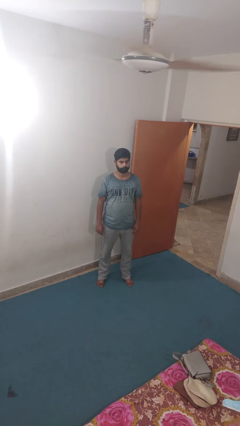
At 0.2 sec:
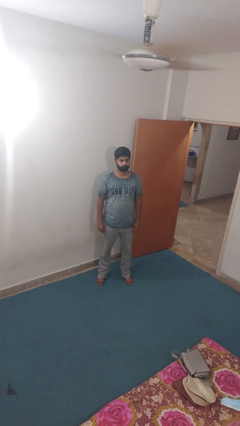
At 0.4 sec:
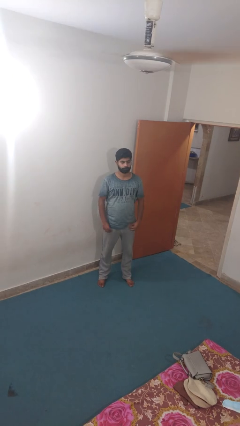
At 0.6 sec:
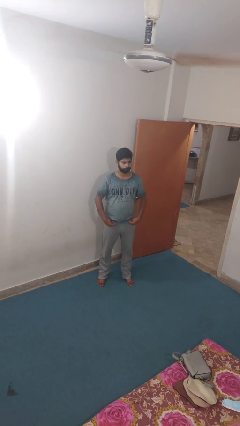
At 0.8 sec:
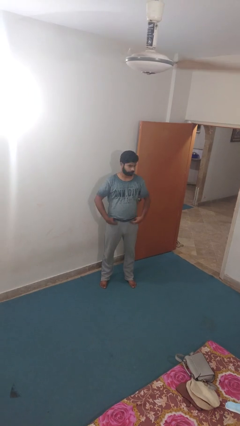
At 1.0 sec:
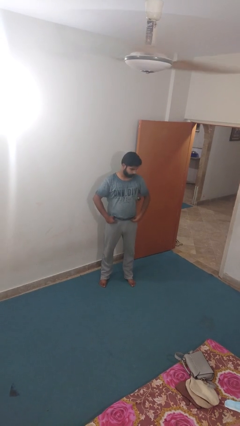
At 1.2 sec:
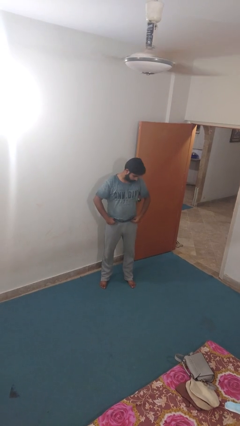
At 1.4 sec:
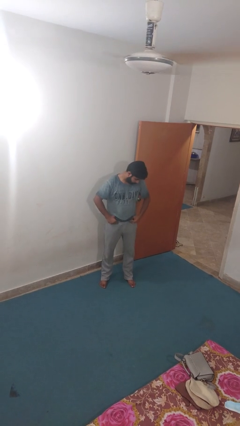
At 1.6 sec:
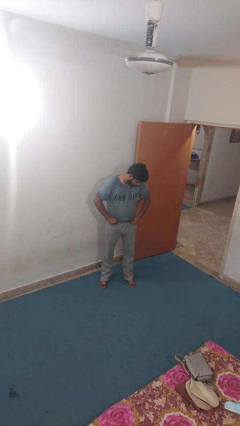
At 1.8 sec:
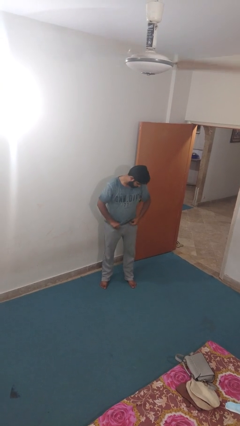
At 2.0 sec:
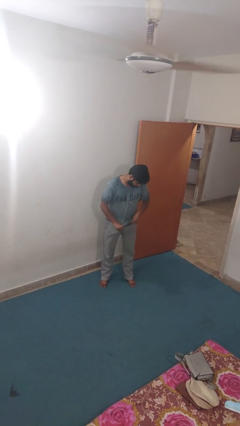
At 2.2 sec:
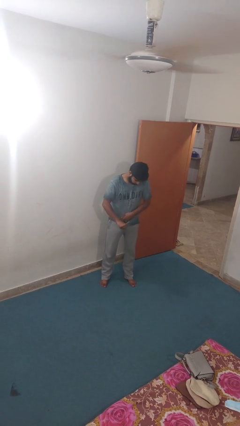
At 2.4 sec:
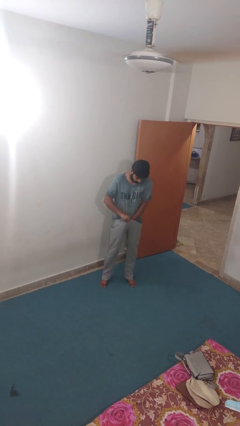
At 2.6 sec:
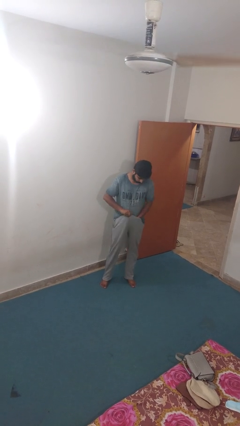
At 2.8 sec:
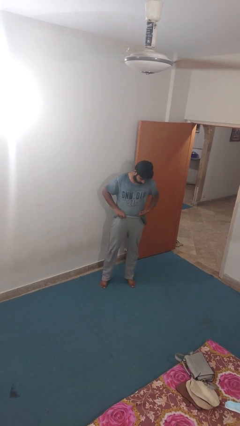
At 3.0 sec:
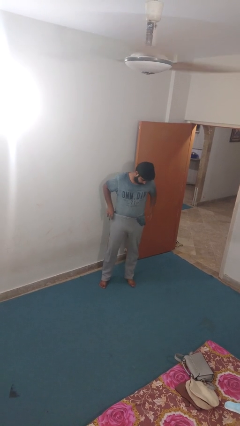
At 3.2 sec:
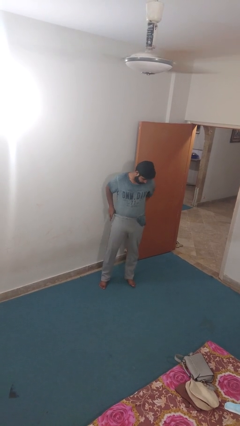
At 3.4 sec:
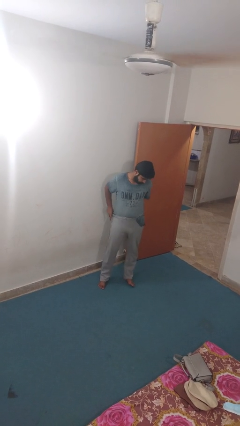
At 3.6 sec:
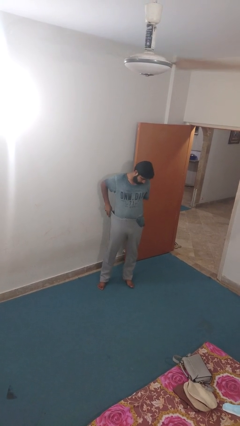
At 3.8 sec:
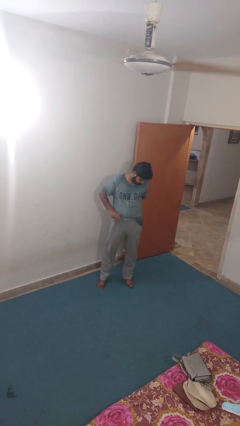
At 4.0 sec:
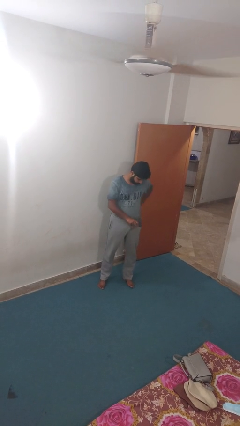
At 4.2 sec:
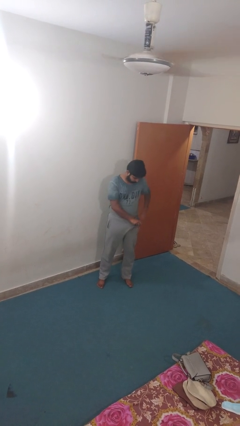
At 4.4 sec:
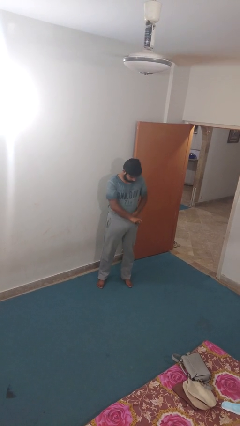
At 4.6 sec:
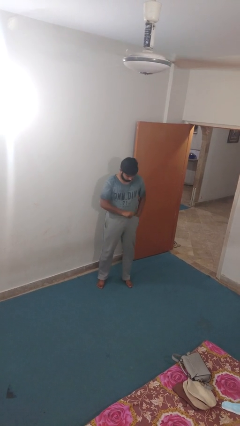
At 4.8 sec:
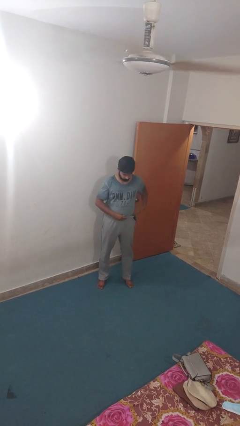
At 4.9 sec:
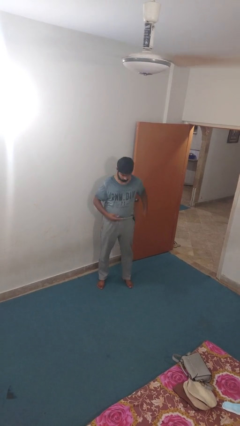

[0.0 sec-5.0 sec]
person tucks in shirt

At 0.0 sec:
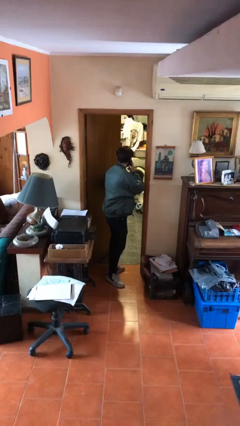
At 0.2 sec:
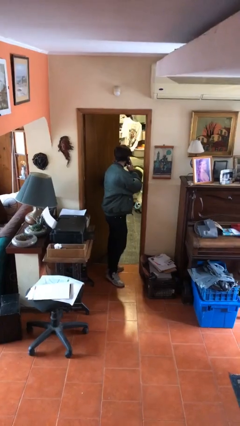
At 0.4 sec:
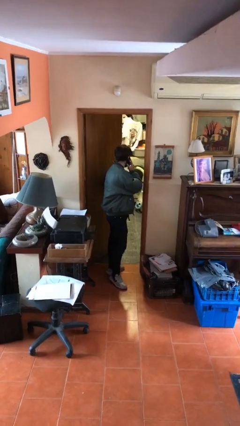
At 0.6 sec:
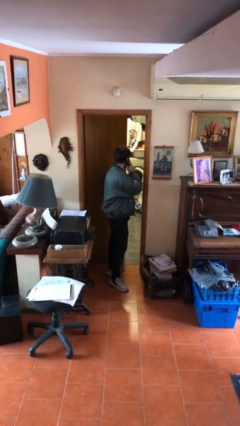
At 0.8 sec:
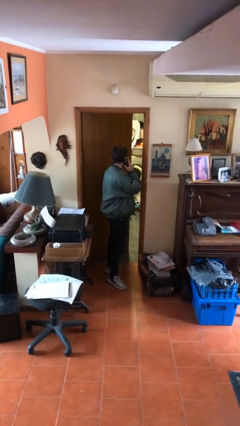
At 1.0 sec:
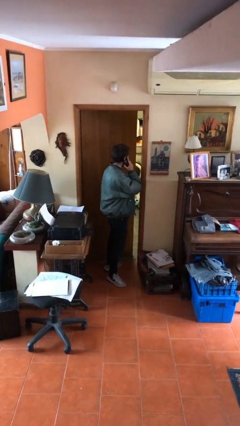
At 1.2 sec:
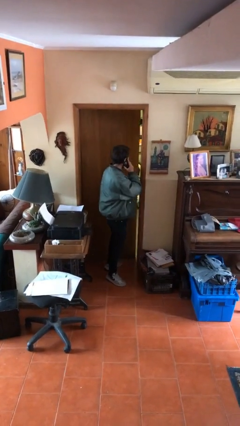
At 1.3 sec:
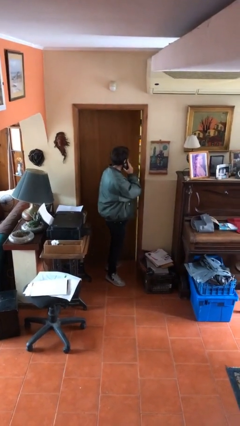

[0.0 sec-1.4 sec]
person closes facility door

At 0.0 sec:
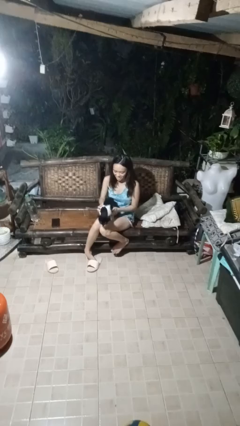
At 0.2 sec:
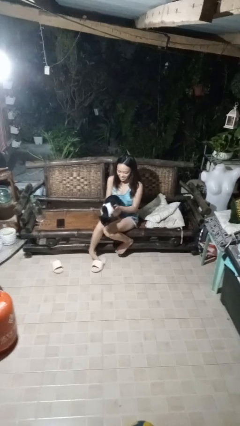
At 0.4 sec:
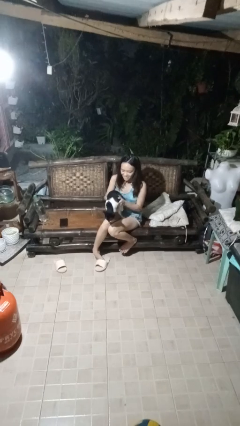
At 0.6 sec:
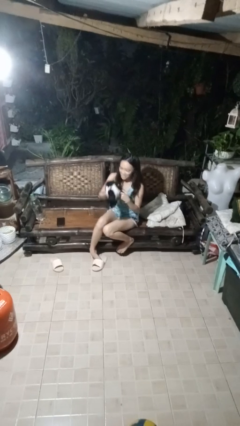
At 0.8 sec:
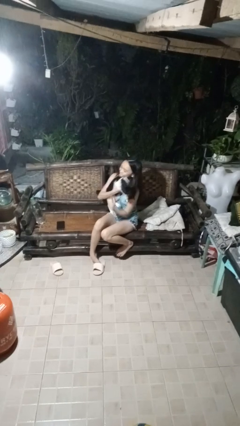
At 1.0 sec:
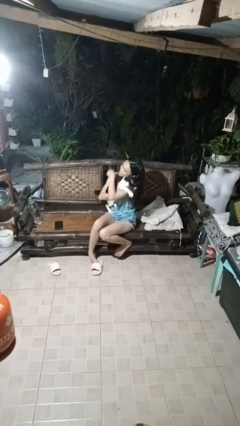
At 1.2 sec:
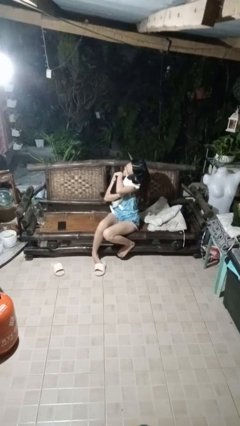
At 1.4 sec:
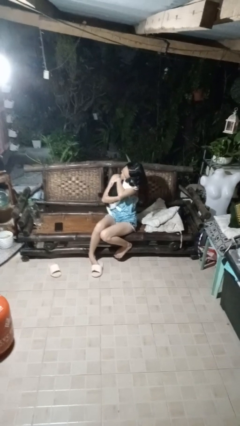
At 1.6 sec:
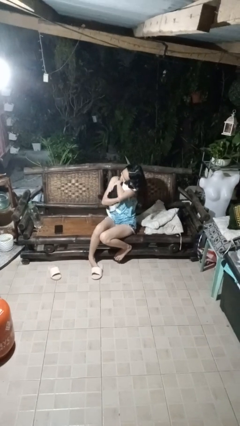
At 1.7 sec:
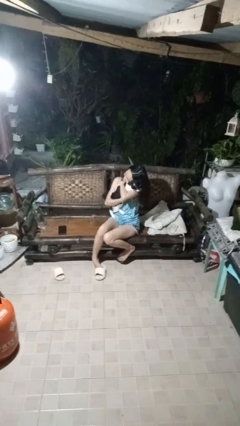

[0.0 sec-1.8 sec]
person hugs cat

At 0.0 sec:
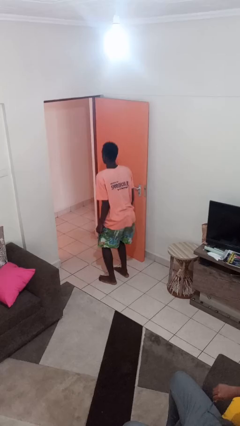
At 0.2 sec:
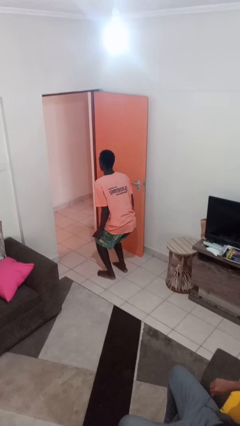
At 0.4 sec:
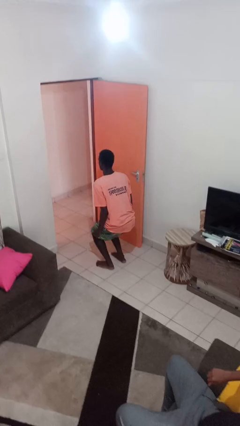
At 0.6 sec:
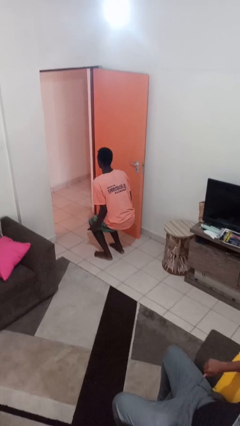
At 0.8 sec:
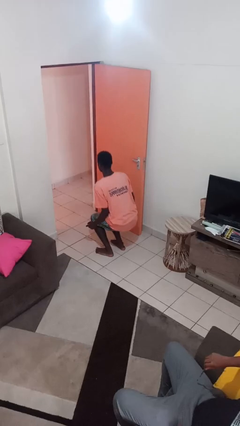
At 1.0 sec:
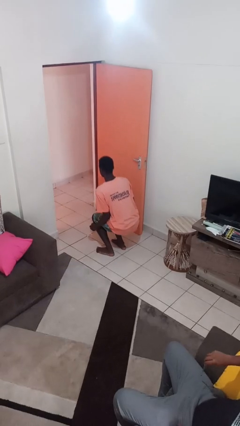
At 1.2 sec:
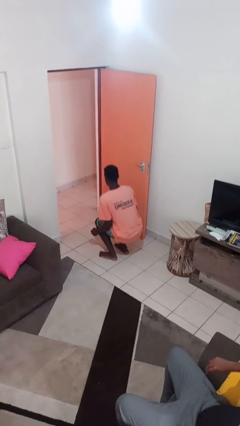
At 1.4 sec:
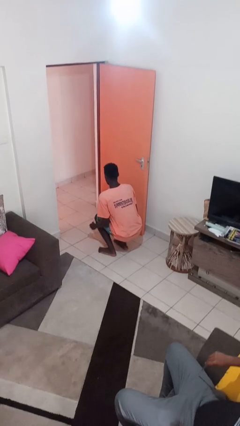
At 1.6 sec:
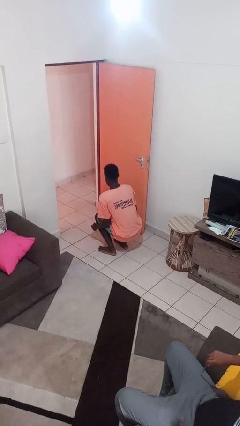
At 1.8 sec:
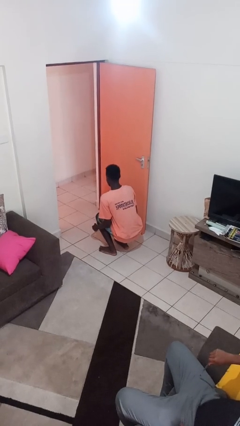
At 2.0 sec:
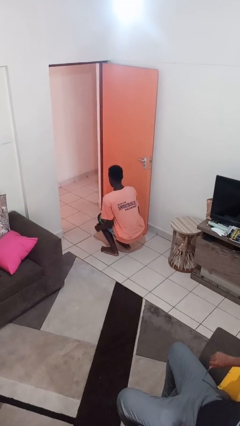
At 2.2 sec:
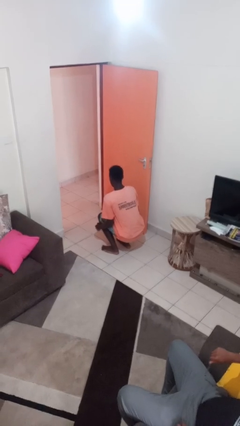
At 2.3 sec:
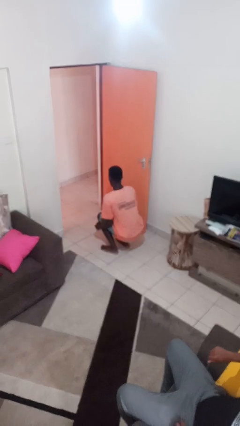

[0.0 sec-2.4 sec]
person squats

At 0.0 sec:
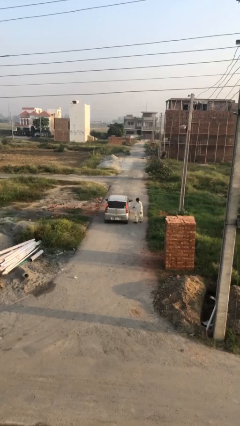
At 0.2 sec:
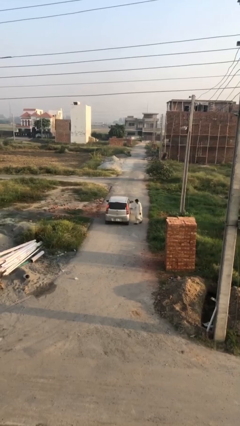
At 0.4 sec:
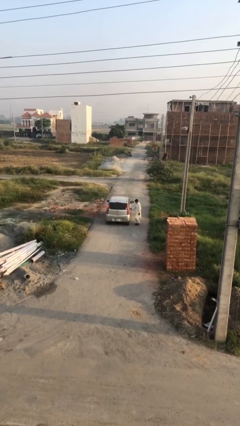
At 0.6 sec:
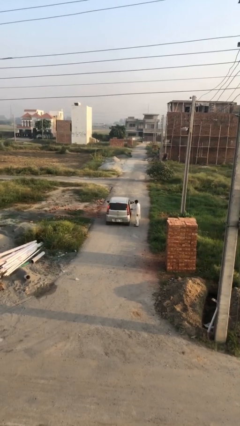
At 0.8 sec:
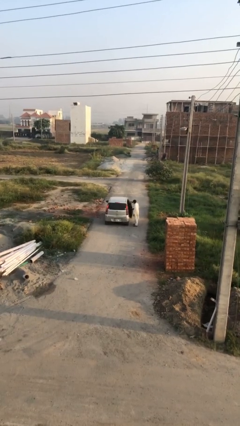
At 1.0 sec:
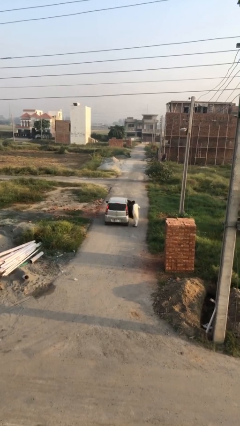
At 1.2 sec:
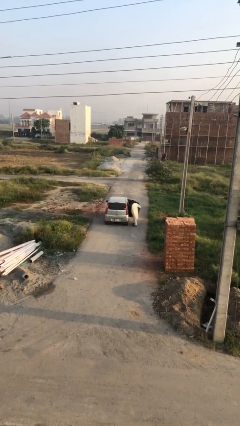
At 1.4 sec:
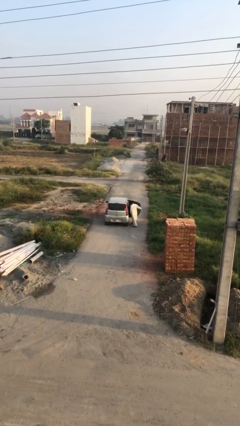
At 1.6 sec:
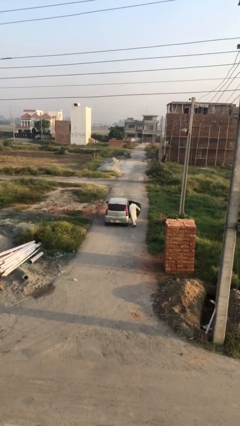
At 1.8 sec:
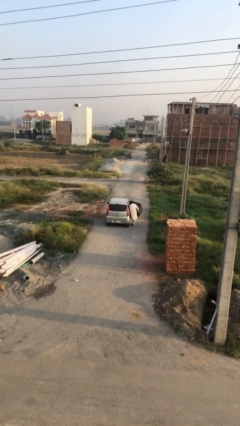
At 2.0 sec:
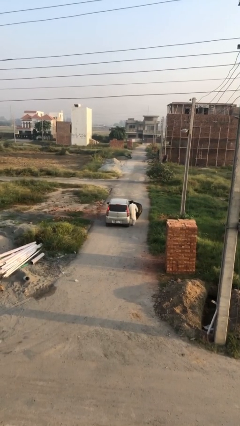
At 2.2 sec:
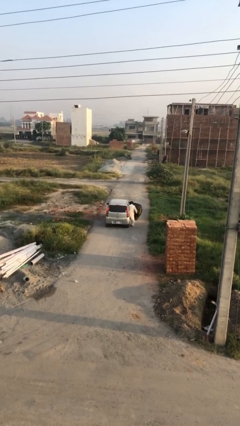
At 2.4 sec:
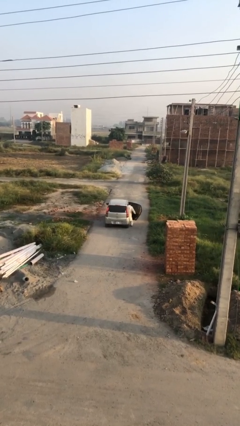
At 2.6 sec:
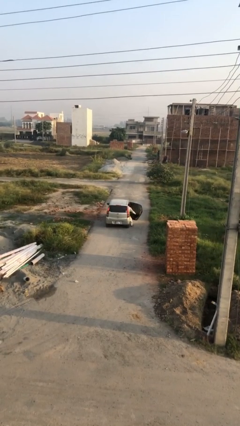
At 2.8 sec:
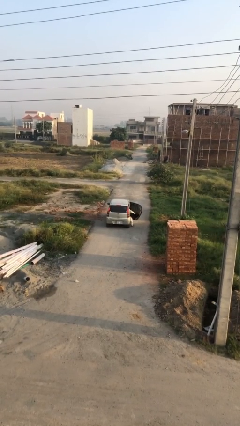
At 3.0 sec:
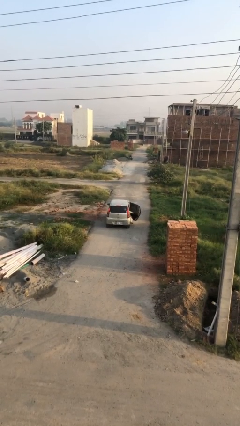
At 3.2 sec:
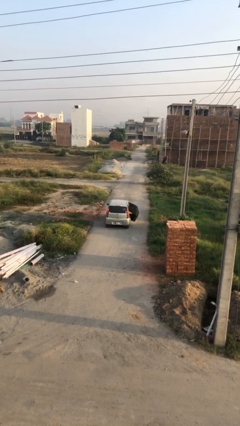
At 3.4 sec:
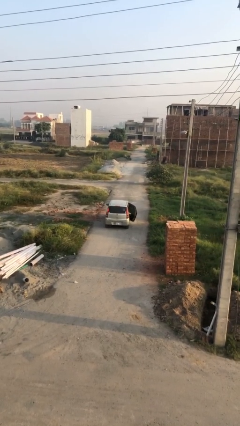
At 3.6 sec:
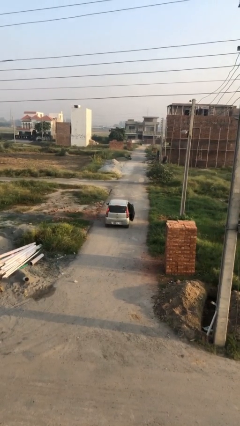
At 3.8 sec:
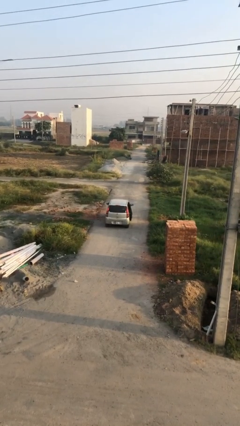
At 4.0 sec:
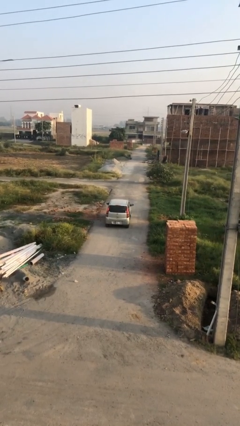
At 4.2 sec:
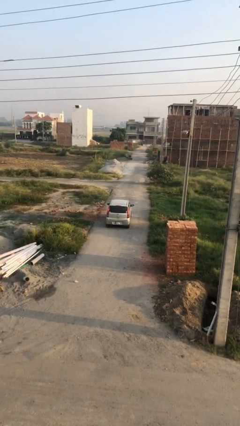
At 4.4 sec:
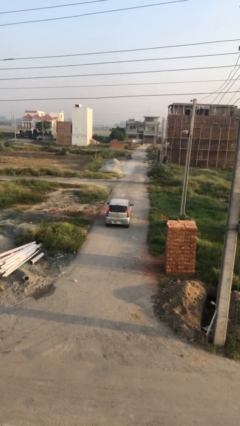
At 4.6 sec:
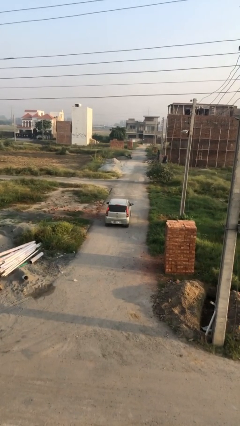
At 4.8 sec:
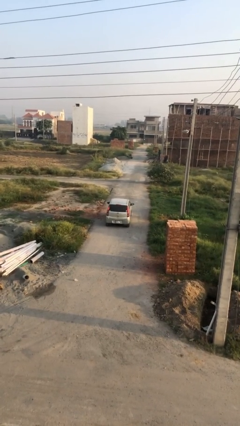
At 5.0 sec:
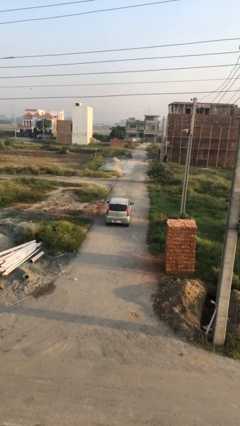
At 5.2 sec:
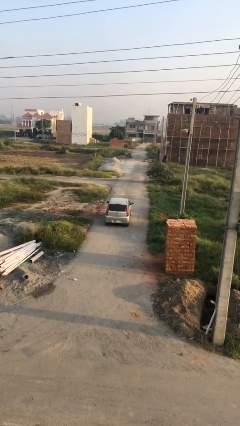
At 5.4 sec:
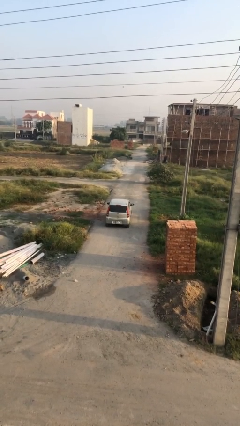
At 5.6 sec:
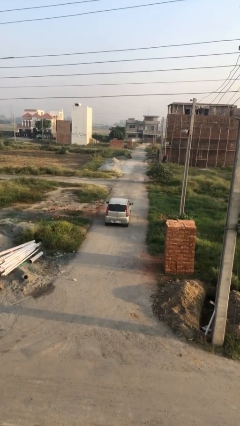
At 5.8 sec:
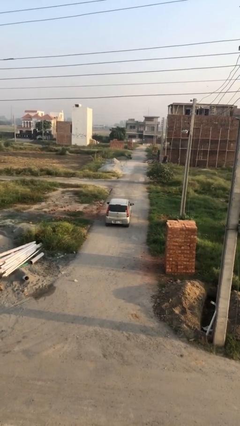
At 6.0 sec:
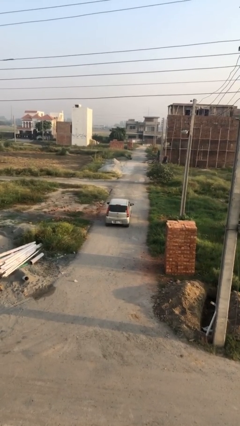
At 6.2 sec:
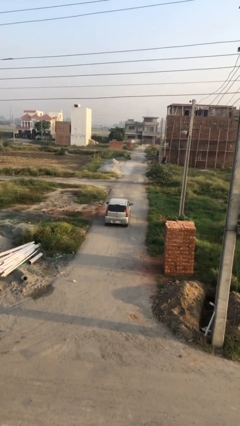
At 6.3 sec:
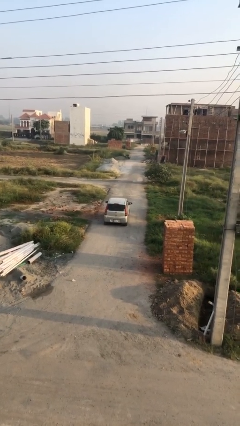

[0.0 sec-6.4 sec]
car picks up person

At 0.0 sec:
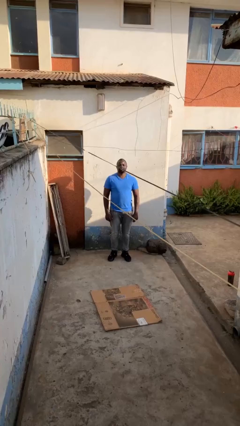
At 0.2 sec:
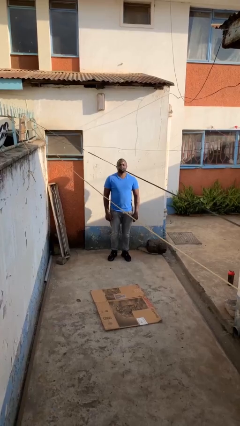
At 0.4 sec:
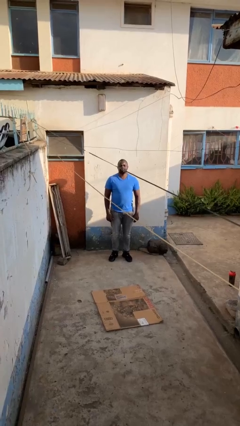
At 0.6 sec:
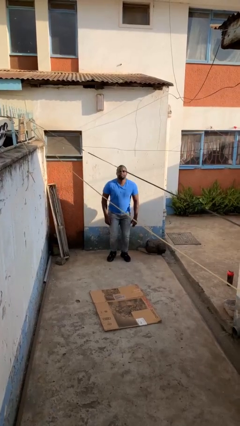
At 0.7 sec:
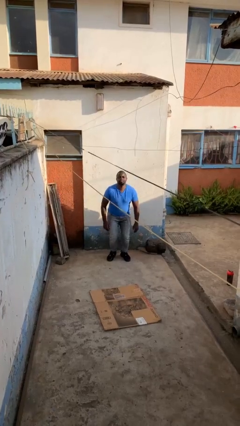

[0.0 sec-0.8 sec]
person jumps
